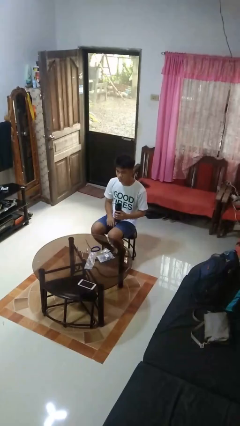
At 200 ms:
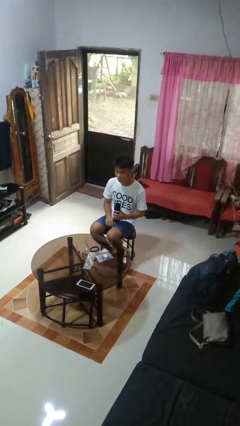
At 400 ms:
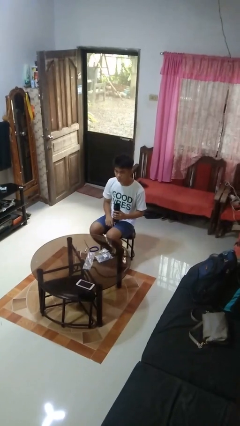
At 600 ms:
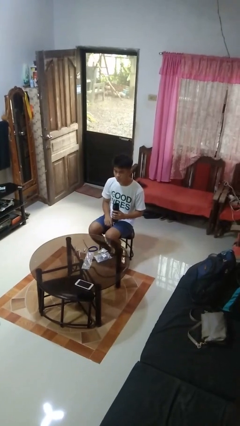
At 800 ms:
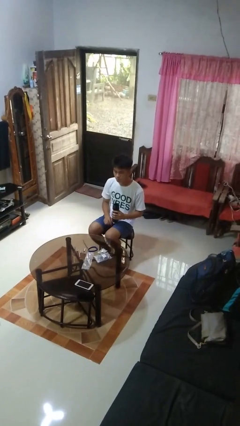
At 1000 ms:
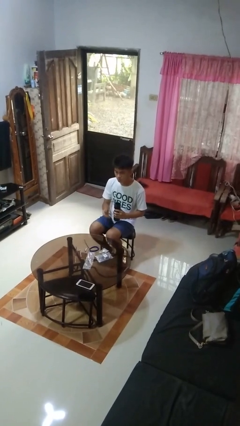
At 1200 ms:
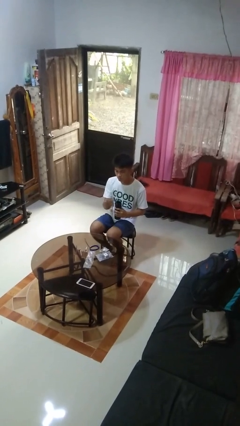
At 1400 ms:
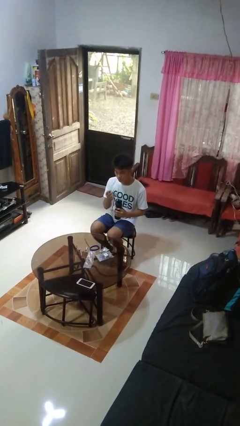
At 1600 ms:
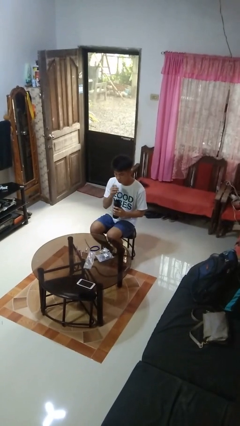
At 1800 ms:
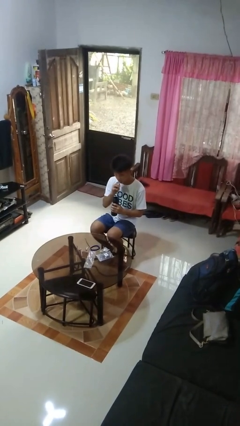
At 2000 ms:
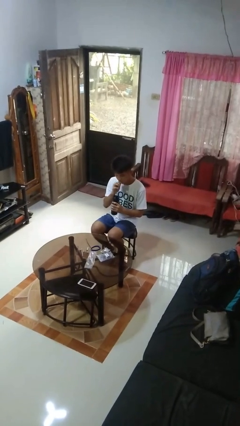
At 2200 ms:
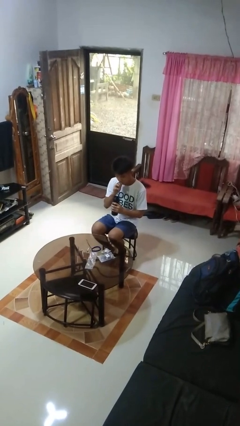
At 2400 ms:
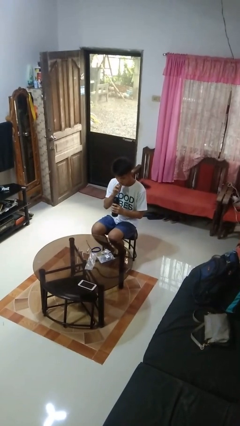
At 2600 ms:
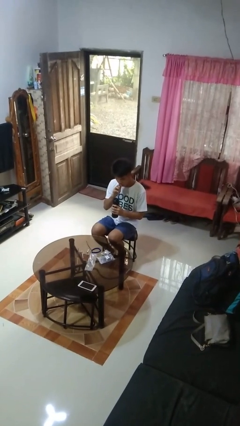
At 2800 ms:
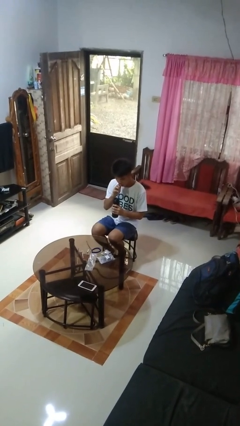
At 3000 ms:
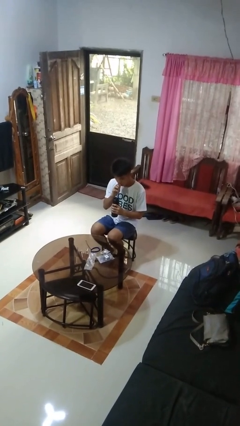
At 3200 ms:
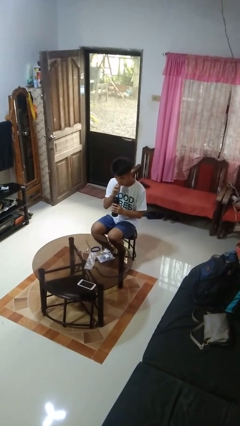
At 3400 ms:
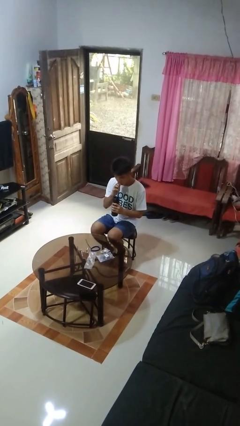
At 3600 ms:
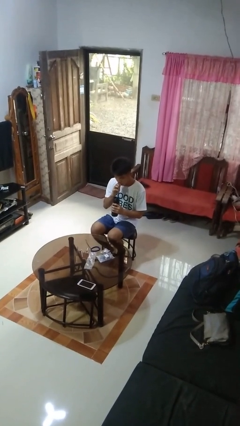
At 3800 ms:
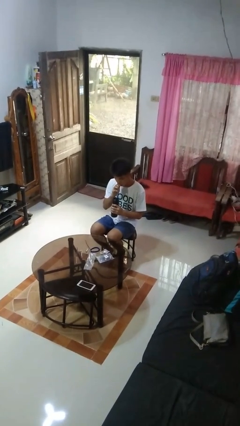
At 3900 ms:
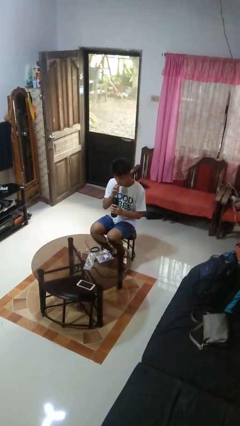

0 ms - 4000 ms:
person drinks from straw

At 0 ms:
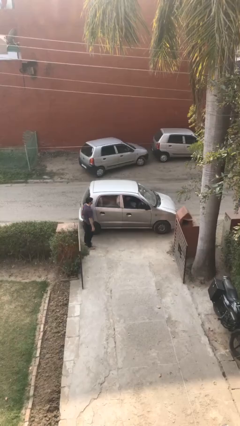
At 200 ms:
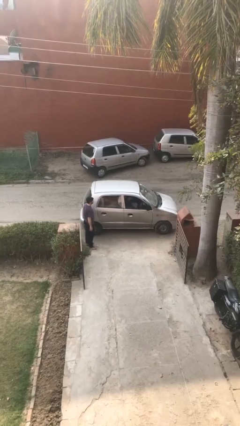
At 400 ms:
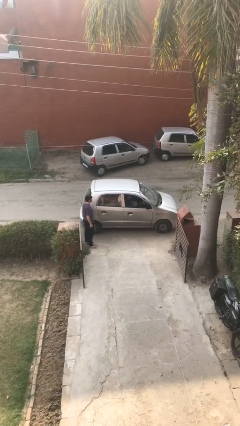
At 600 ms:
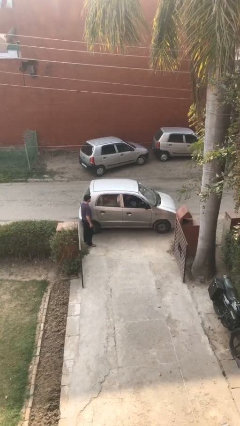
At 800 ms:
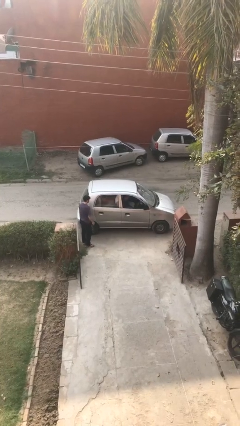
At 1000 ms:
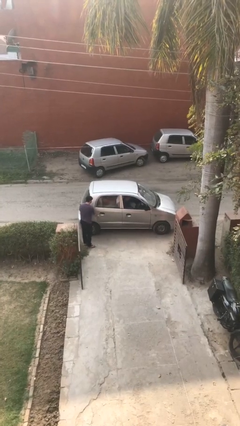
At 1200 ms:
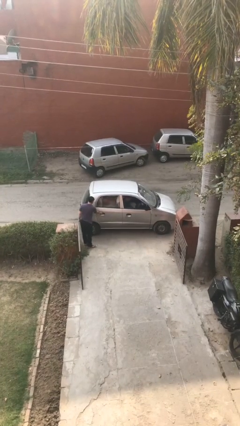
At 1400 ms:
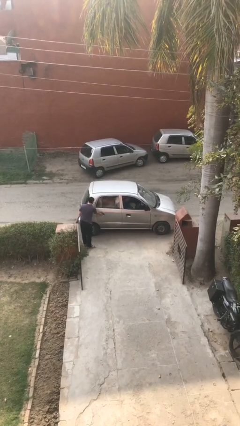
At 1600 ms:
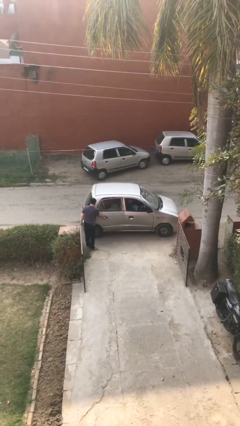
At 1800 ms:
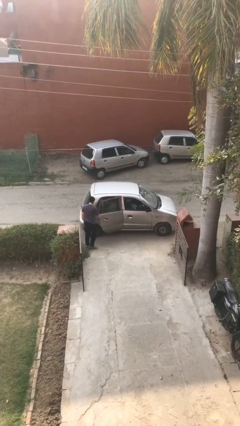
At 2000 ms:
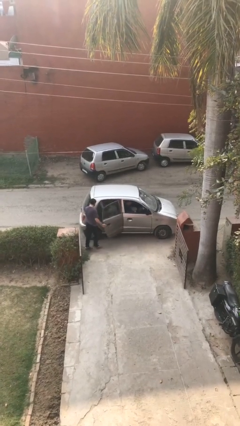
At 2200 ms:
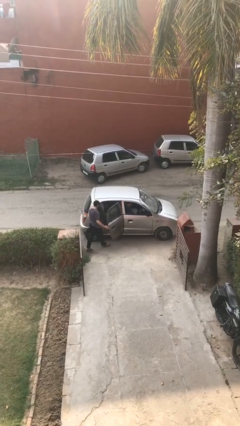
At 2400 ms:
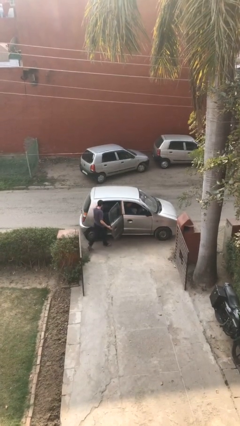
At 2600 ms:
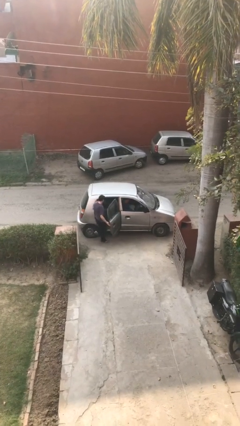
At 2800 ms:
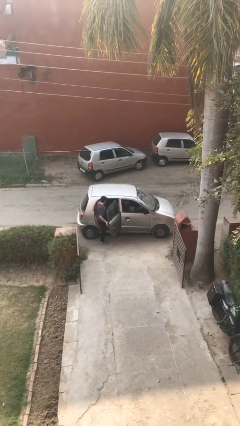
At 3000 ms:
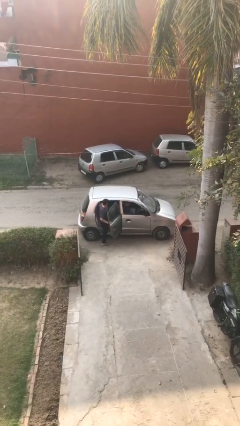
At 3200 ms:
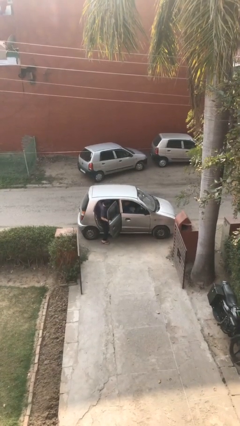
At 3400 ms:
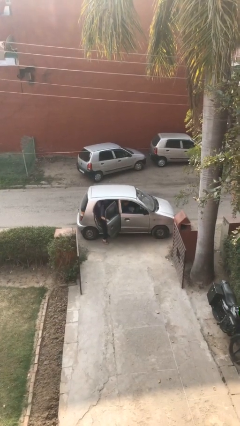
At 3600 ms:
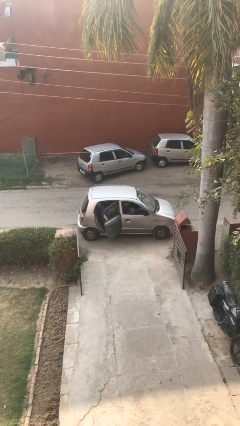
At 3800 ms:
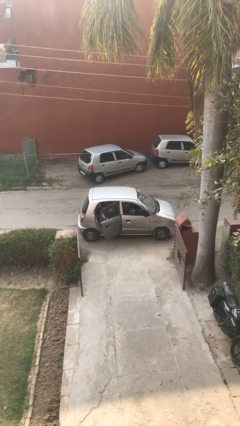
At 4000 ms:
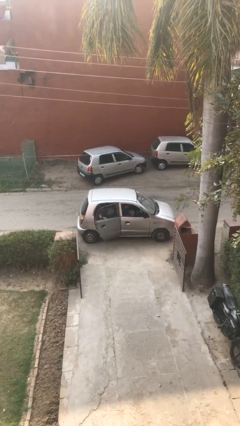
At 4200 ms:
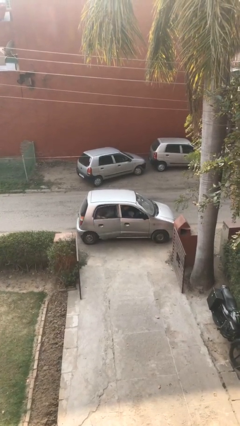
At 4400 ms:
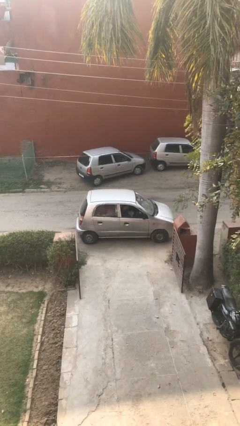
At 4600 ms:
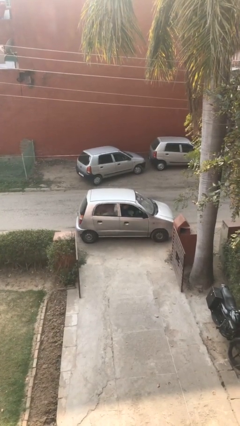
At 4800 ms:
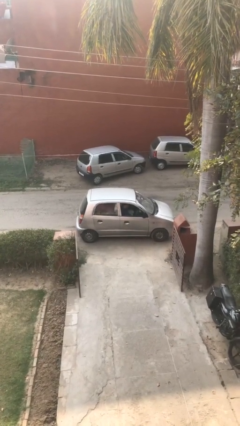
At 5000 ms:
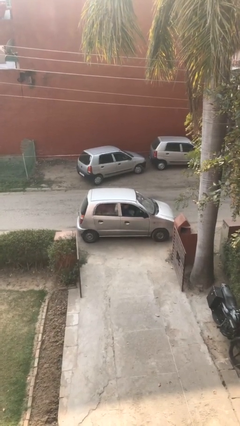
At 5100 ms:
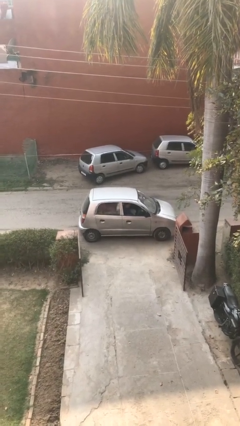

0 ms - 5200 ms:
car picks up person

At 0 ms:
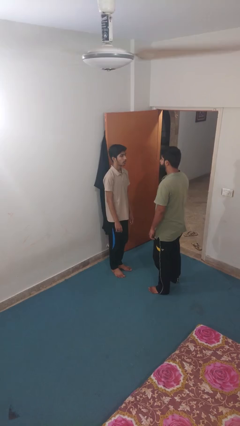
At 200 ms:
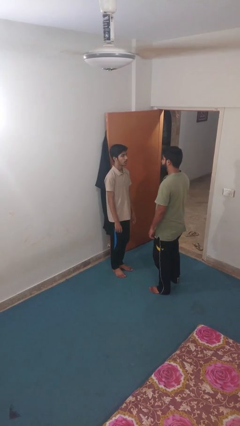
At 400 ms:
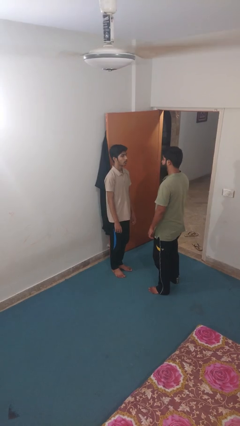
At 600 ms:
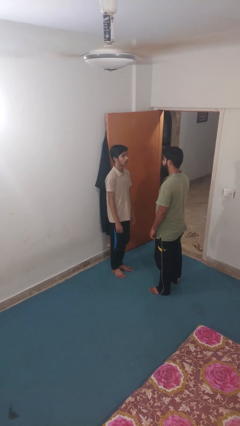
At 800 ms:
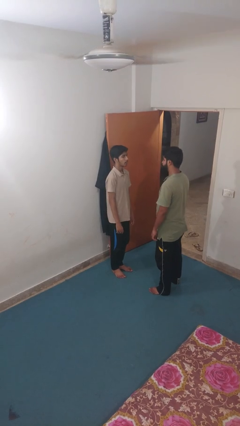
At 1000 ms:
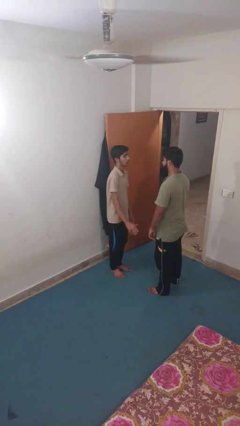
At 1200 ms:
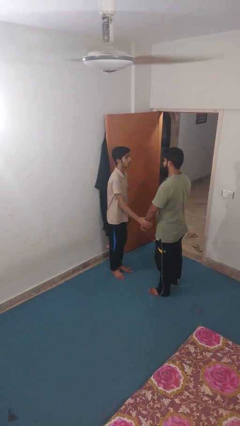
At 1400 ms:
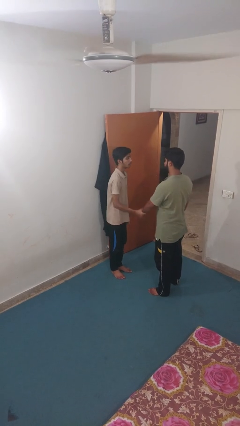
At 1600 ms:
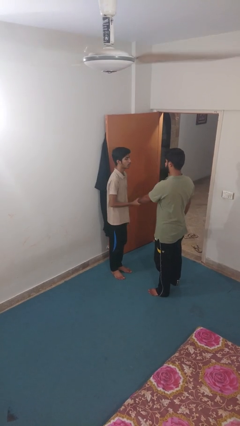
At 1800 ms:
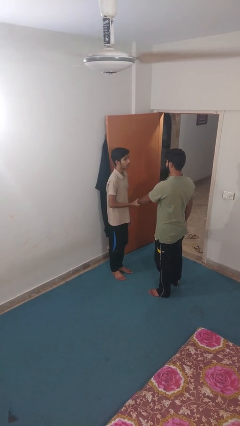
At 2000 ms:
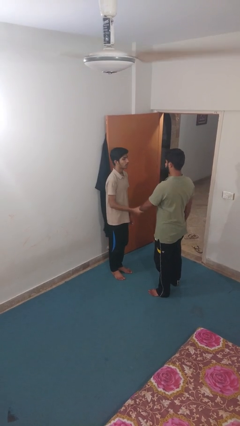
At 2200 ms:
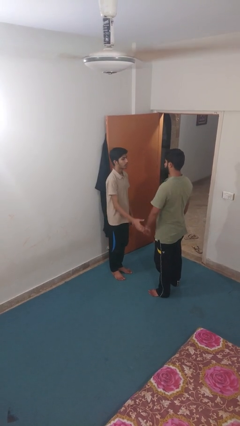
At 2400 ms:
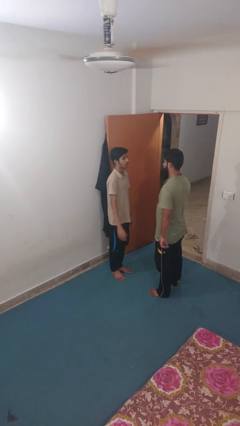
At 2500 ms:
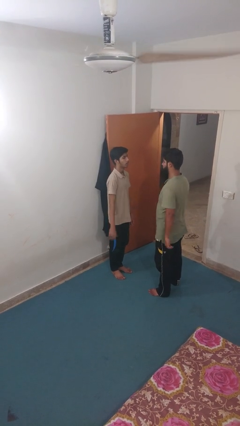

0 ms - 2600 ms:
person grabs person by forearm

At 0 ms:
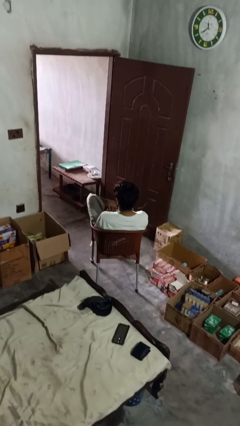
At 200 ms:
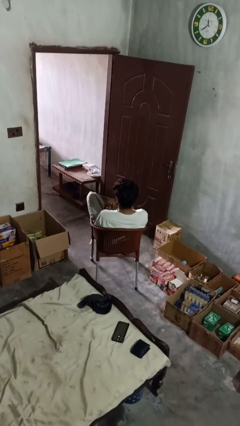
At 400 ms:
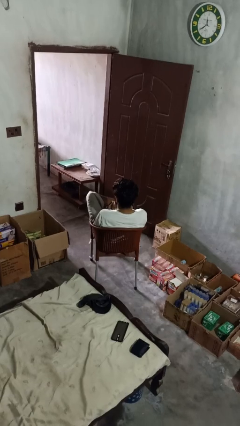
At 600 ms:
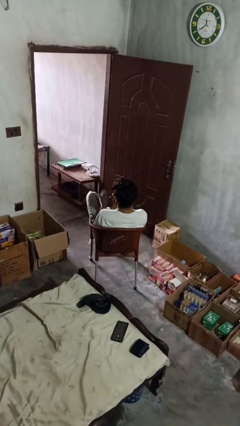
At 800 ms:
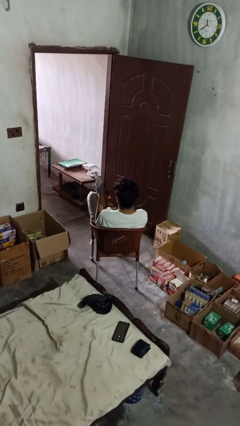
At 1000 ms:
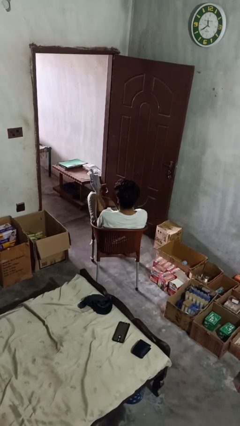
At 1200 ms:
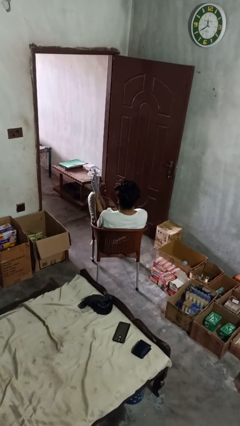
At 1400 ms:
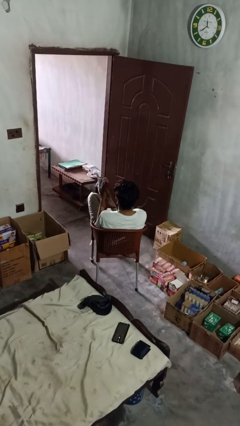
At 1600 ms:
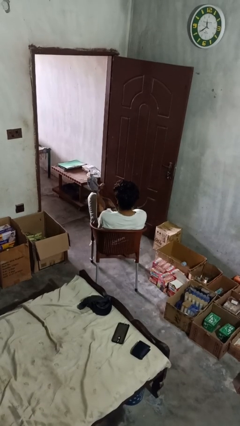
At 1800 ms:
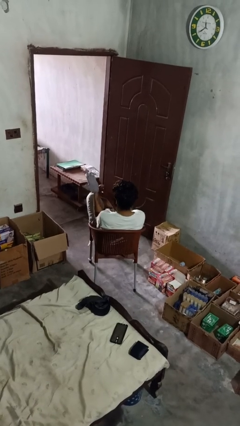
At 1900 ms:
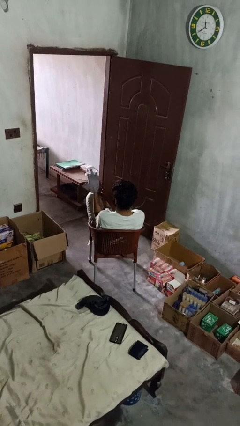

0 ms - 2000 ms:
person puts on gloves

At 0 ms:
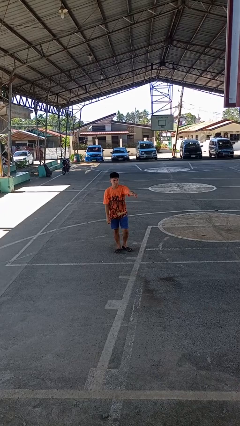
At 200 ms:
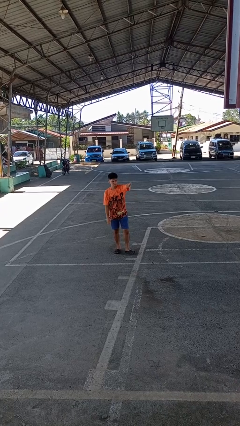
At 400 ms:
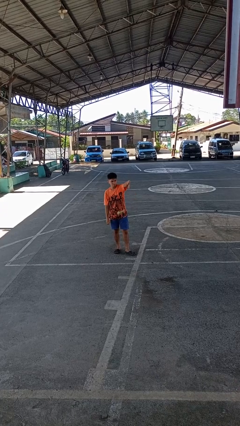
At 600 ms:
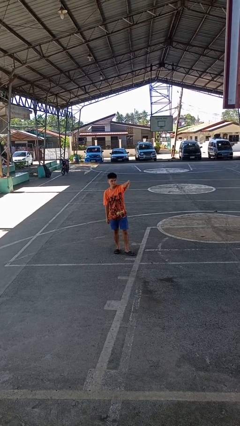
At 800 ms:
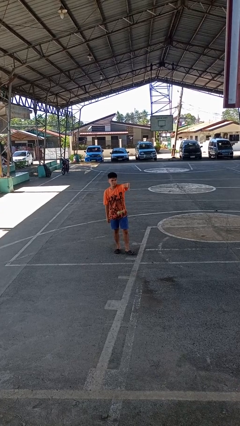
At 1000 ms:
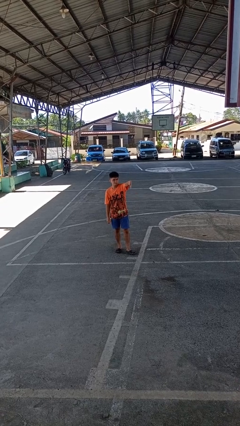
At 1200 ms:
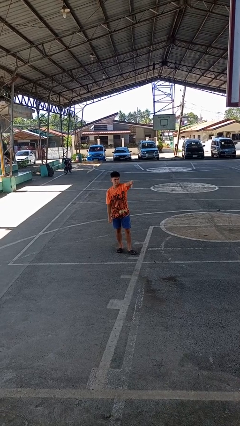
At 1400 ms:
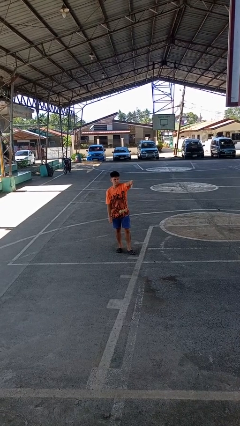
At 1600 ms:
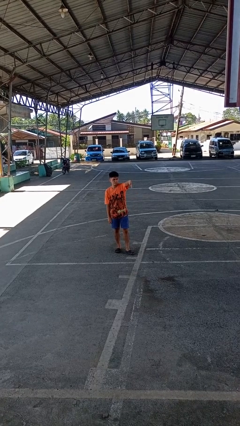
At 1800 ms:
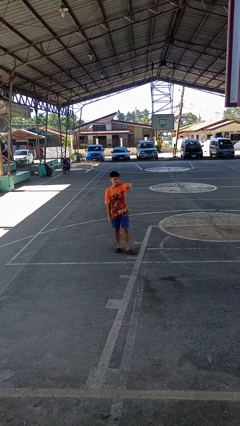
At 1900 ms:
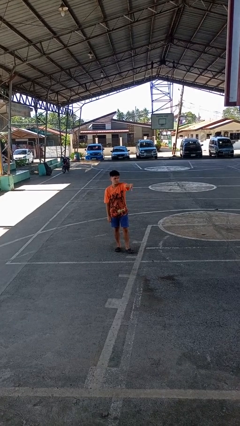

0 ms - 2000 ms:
person gestures thumbs down

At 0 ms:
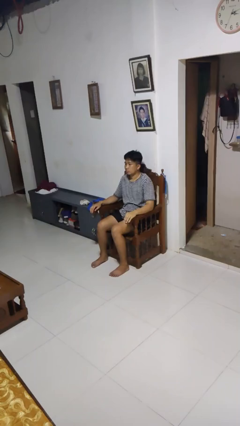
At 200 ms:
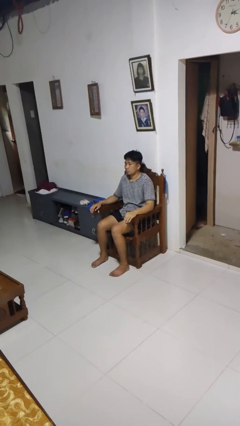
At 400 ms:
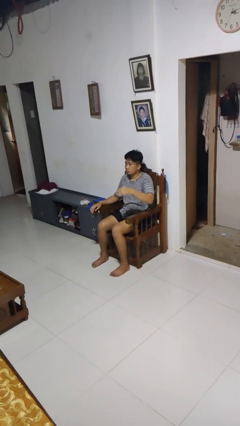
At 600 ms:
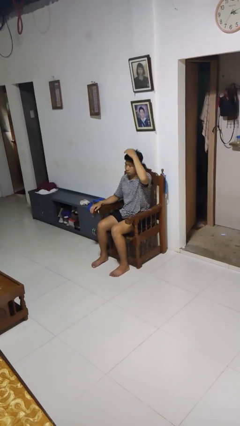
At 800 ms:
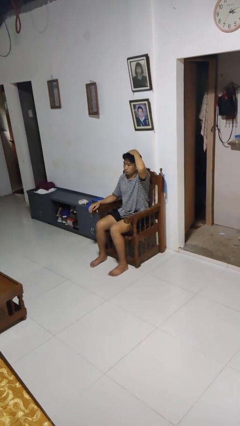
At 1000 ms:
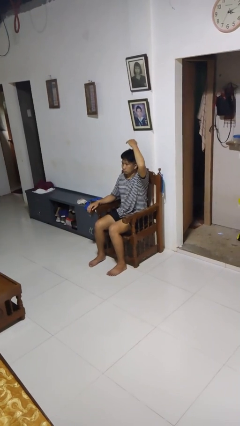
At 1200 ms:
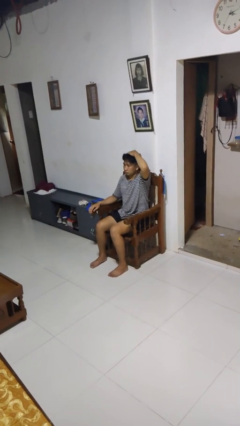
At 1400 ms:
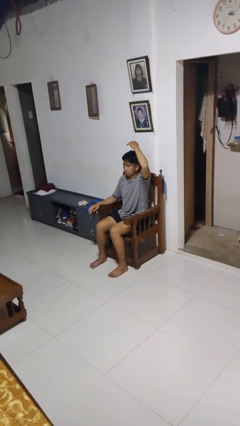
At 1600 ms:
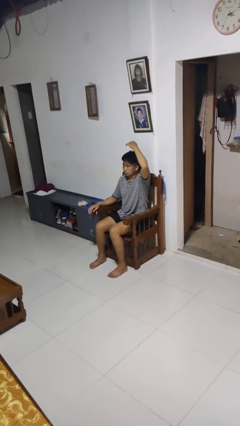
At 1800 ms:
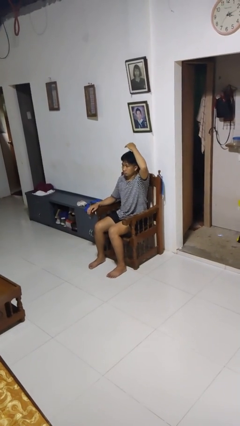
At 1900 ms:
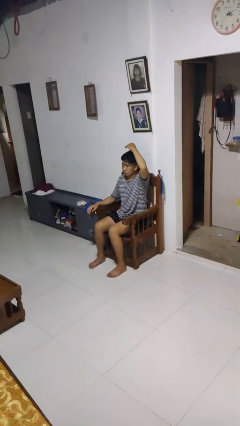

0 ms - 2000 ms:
person pats head
